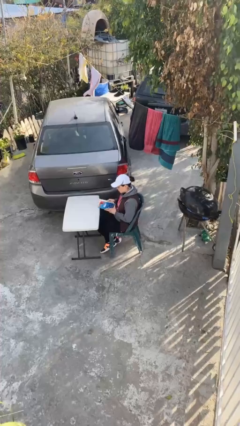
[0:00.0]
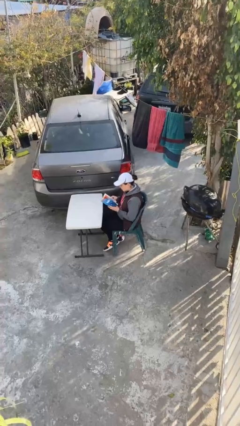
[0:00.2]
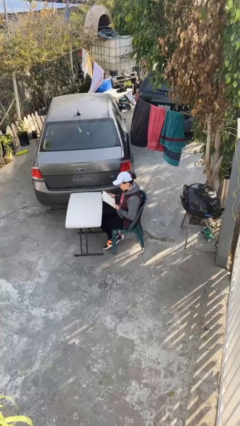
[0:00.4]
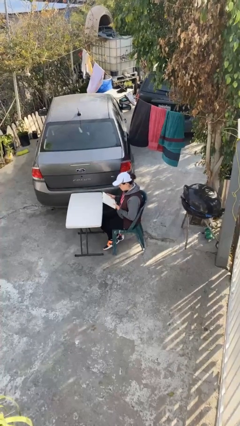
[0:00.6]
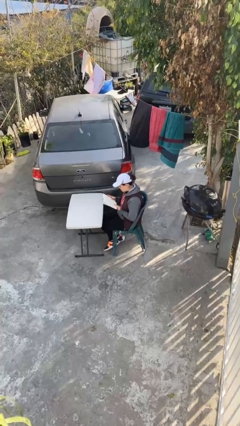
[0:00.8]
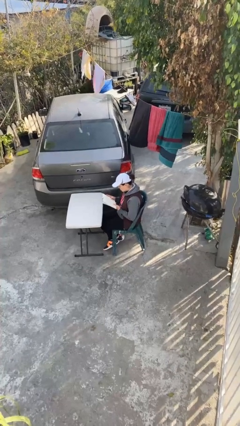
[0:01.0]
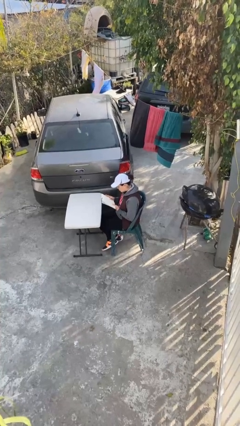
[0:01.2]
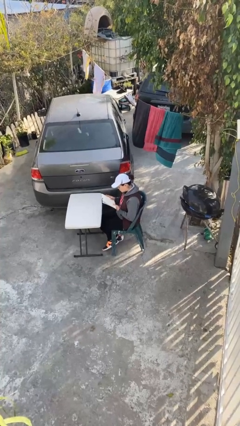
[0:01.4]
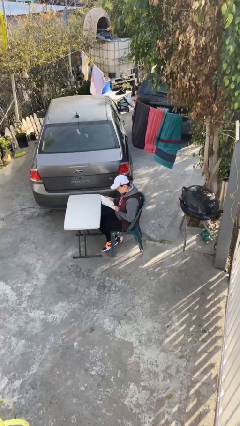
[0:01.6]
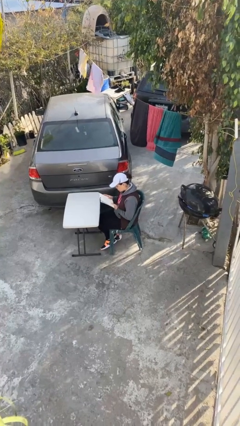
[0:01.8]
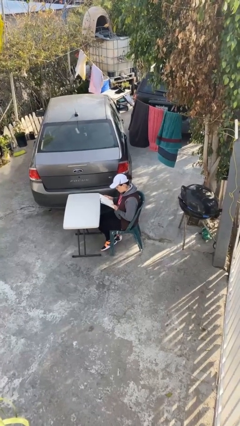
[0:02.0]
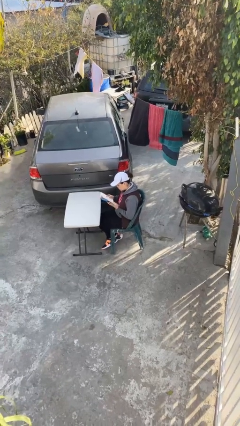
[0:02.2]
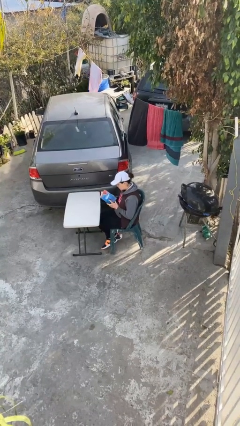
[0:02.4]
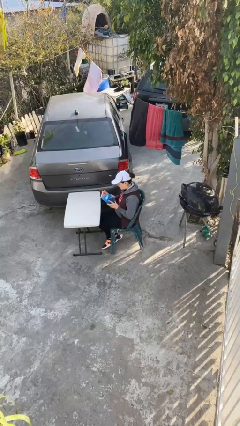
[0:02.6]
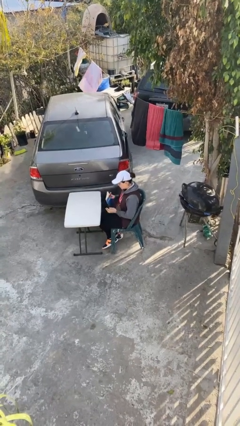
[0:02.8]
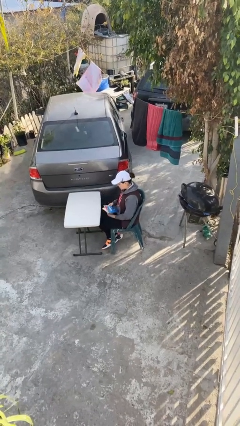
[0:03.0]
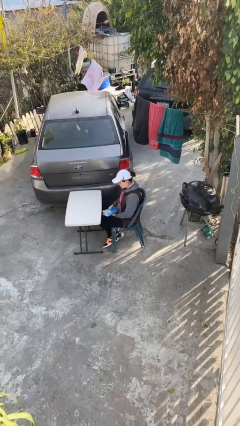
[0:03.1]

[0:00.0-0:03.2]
person reads document

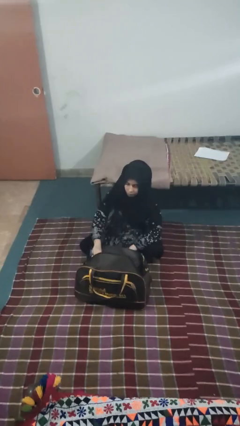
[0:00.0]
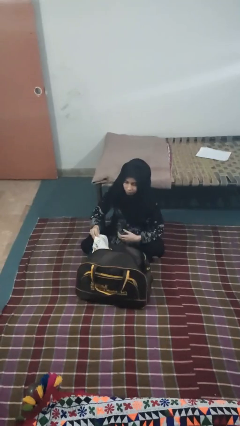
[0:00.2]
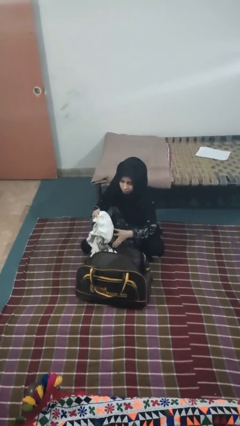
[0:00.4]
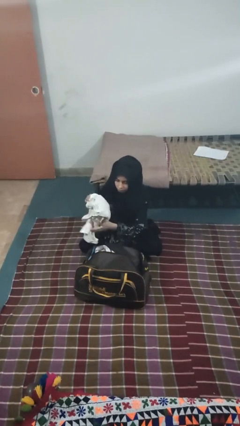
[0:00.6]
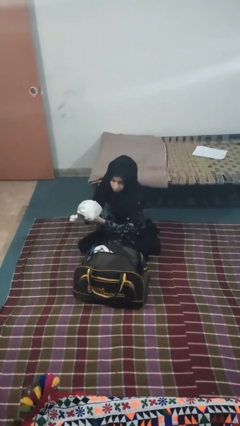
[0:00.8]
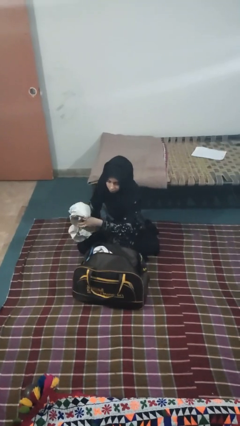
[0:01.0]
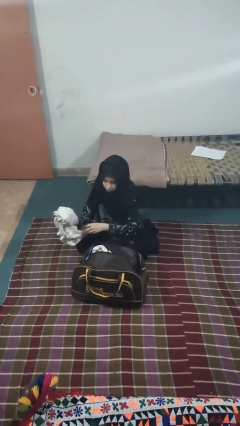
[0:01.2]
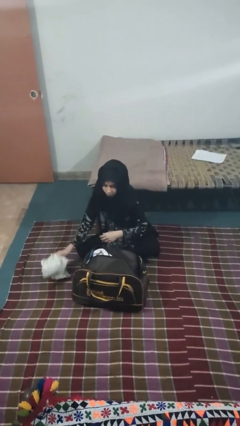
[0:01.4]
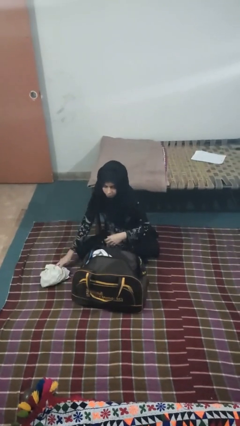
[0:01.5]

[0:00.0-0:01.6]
person unloads clothes from suitcase

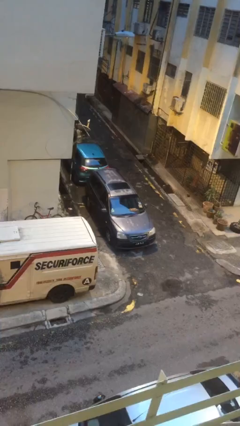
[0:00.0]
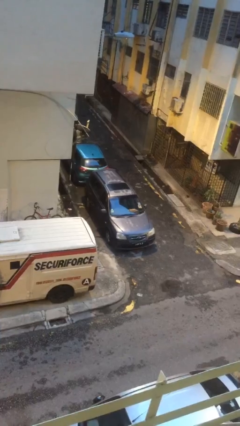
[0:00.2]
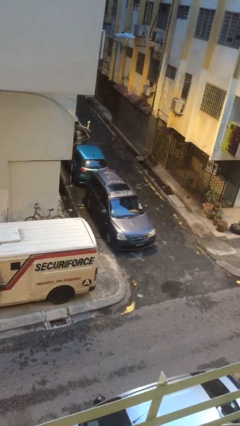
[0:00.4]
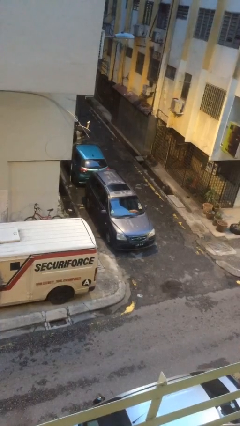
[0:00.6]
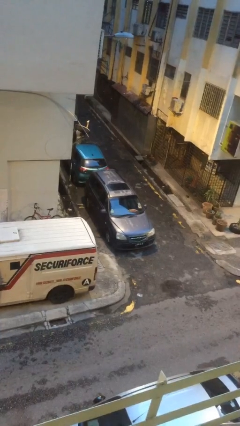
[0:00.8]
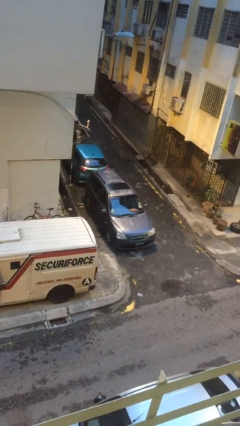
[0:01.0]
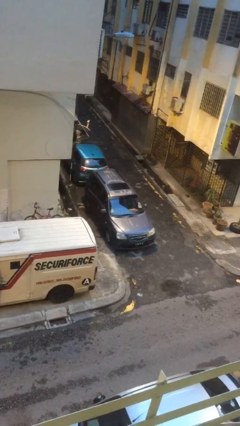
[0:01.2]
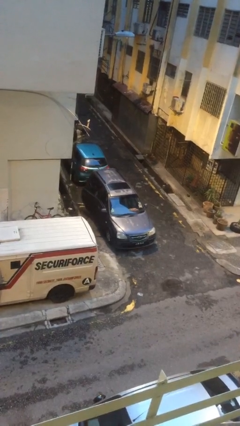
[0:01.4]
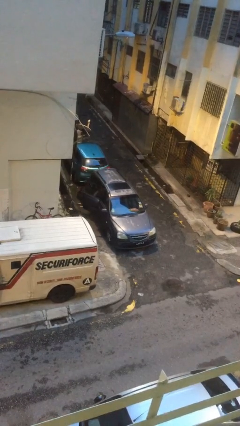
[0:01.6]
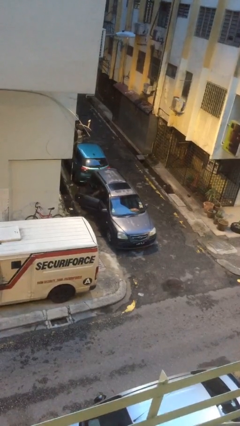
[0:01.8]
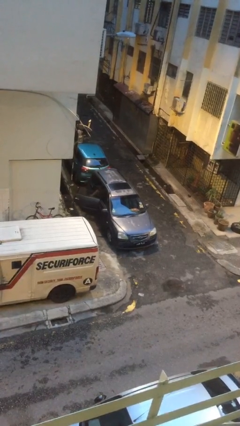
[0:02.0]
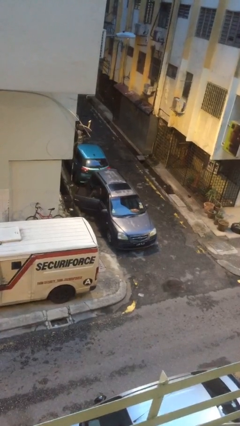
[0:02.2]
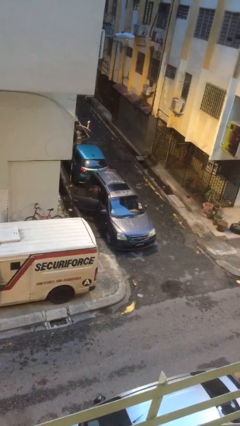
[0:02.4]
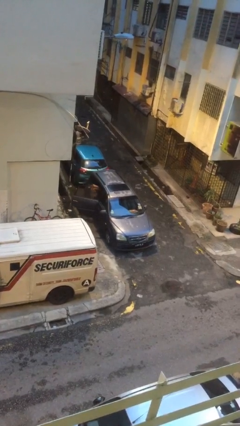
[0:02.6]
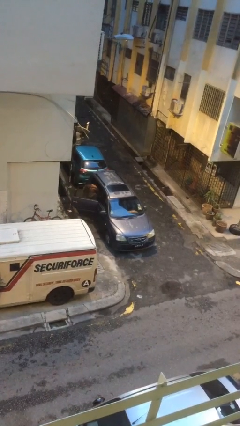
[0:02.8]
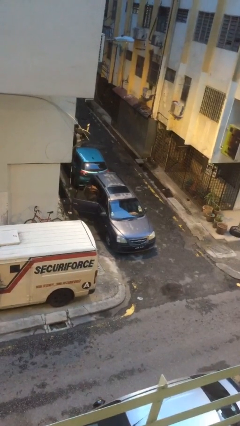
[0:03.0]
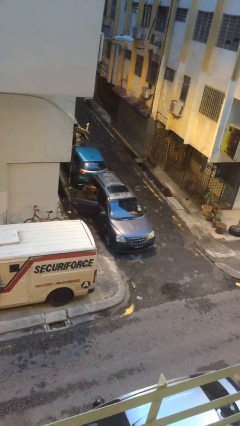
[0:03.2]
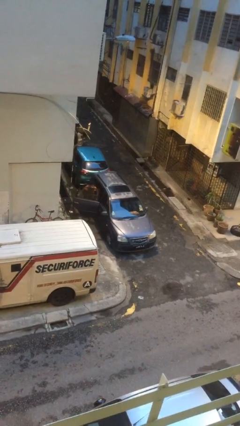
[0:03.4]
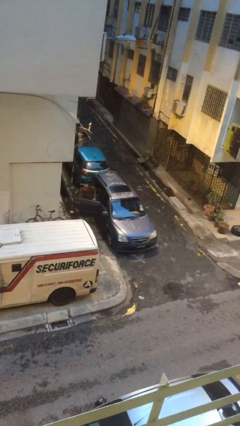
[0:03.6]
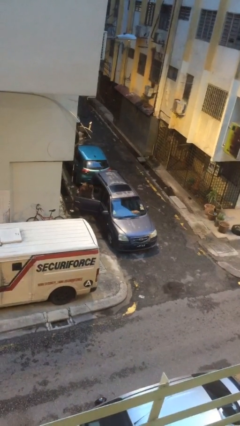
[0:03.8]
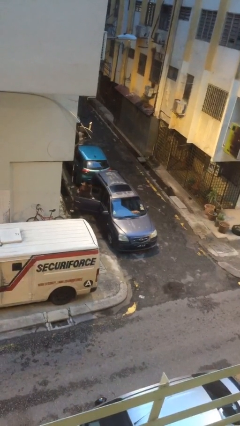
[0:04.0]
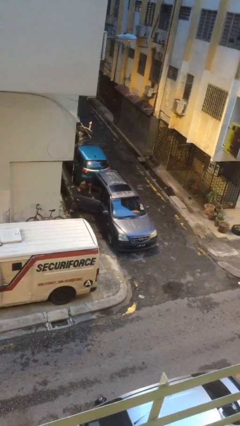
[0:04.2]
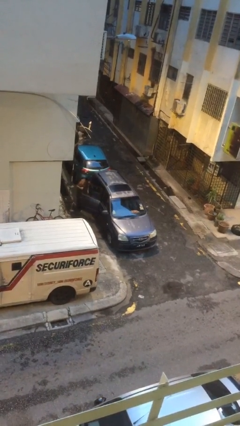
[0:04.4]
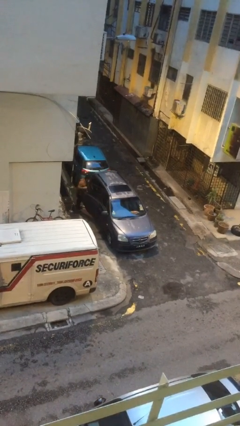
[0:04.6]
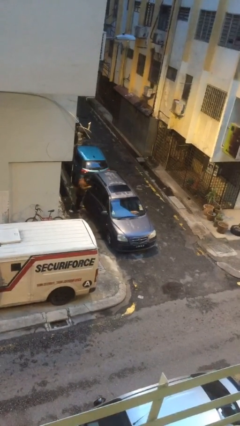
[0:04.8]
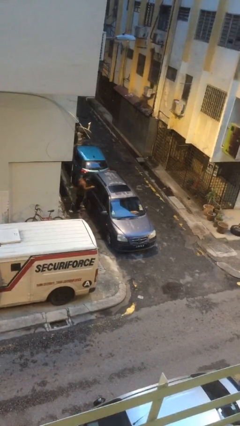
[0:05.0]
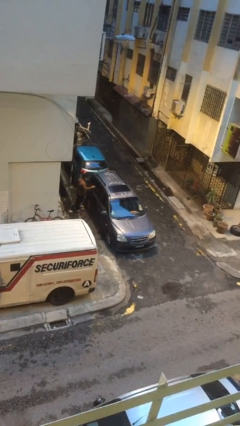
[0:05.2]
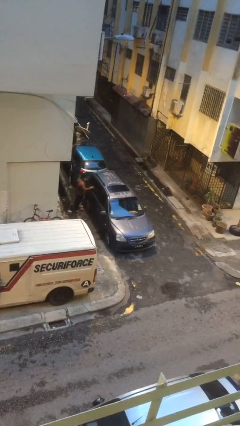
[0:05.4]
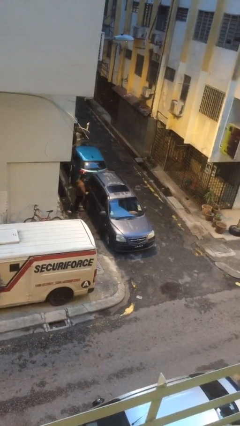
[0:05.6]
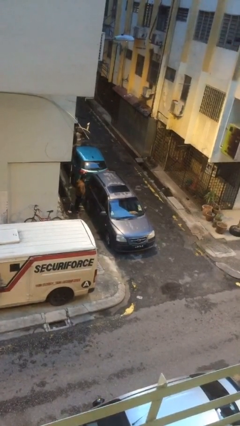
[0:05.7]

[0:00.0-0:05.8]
car drops off person

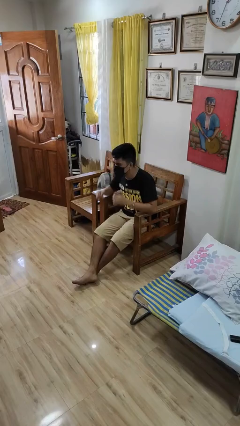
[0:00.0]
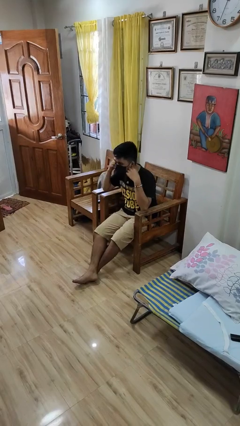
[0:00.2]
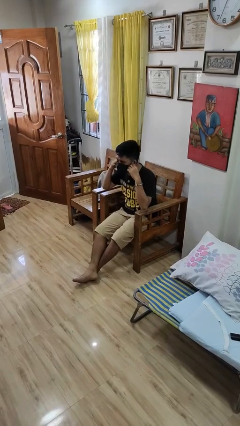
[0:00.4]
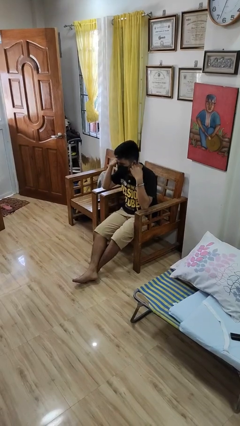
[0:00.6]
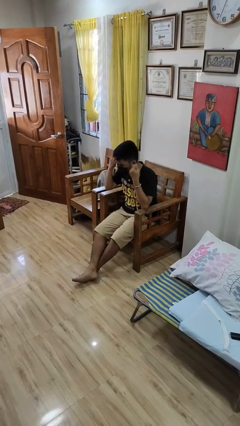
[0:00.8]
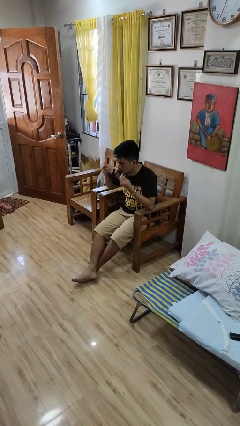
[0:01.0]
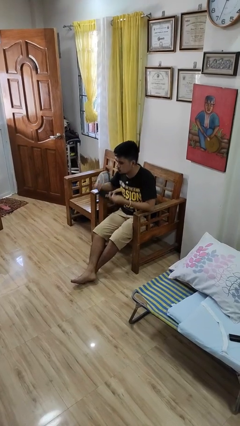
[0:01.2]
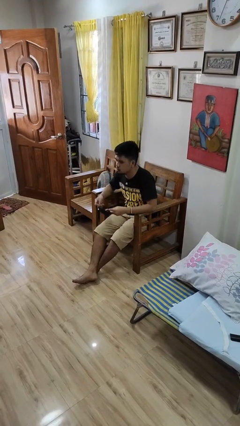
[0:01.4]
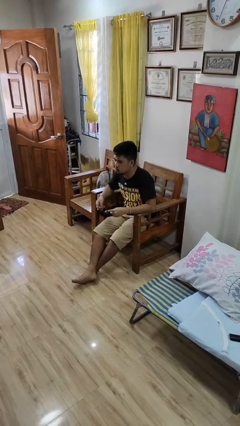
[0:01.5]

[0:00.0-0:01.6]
person takes off facemask

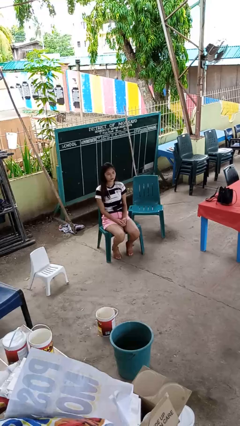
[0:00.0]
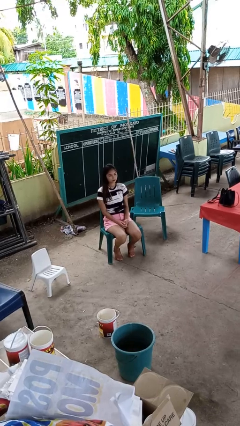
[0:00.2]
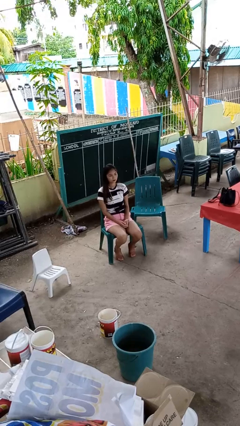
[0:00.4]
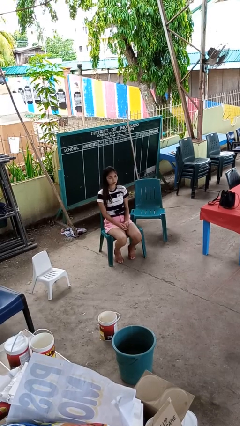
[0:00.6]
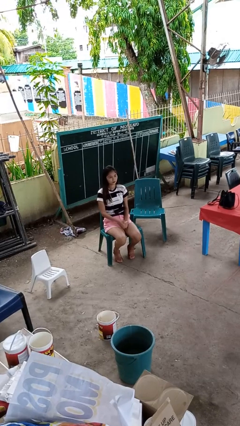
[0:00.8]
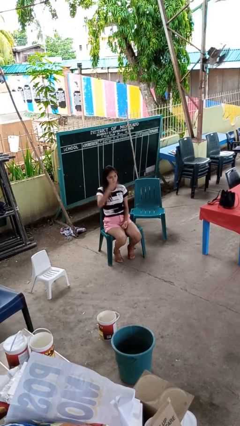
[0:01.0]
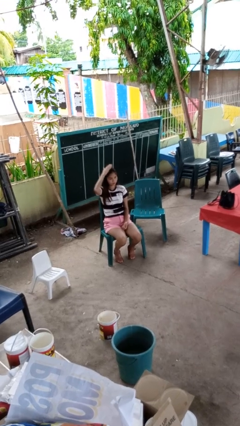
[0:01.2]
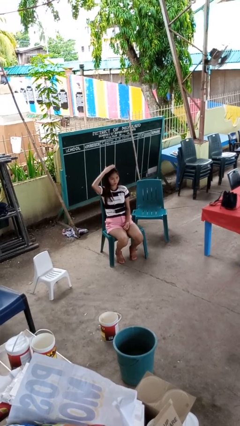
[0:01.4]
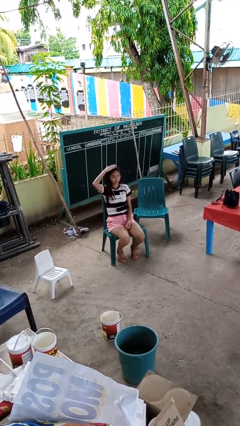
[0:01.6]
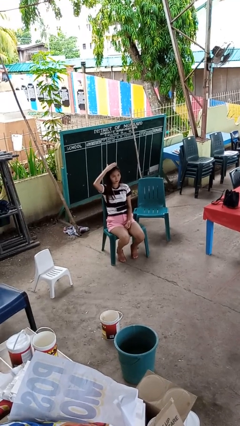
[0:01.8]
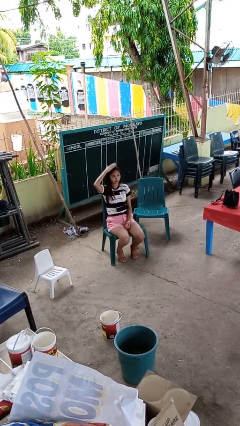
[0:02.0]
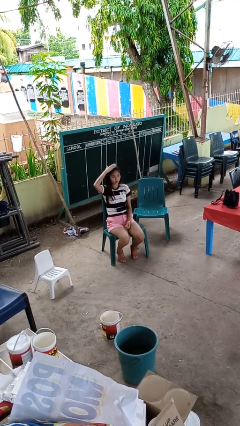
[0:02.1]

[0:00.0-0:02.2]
person pats head

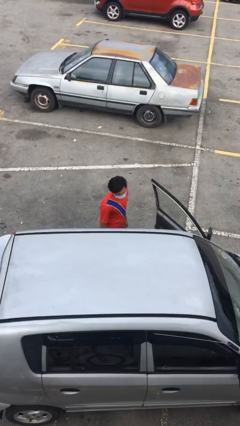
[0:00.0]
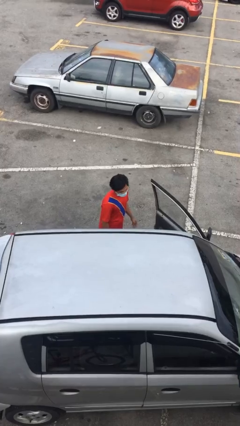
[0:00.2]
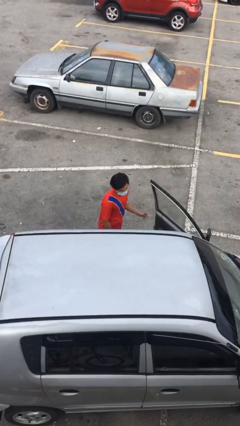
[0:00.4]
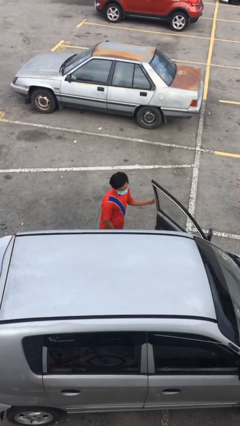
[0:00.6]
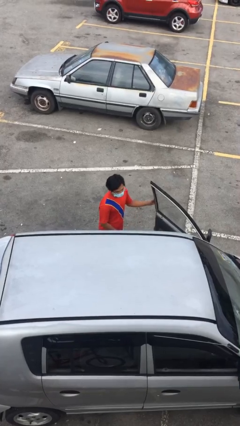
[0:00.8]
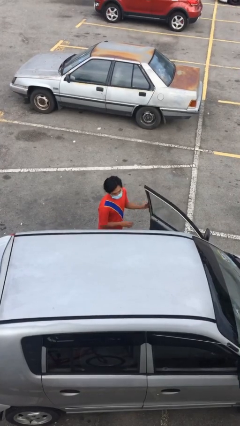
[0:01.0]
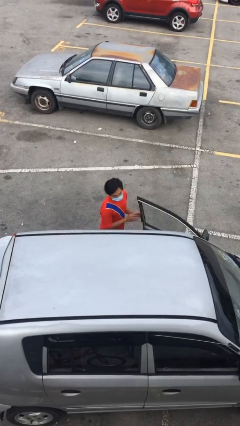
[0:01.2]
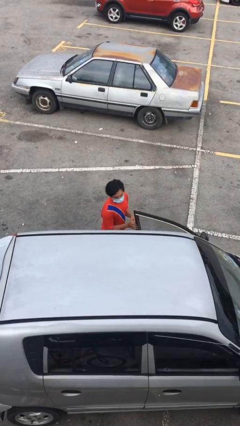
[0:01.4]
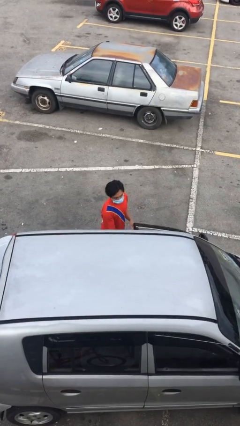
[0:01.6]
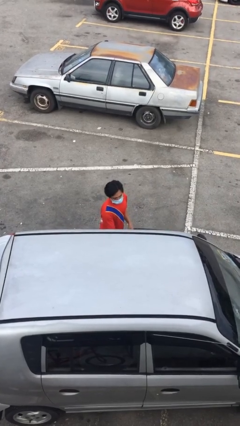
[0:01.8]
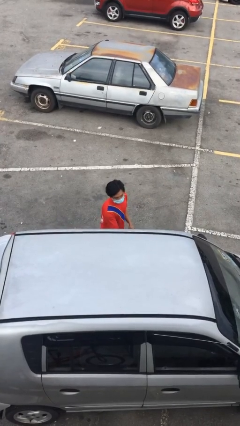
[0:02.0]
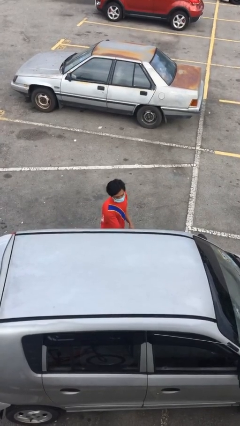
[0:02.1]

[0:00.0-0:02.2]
person closes car door

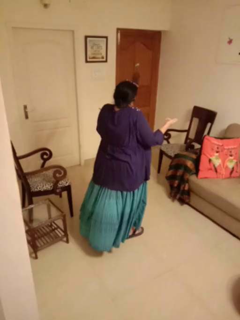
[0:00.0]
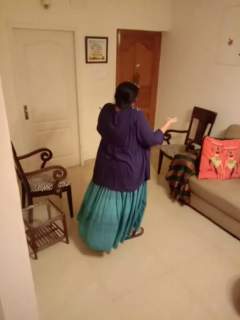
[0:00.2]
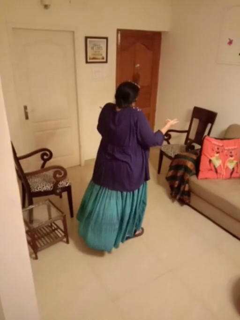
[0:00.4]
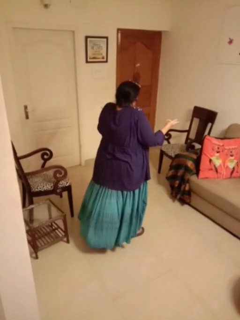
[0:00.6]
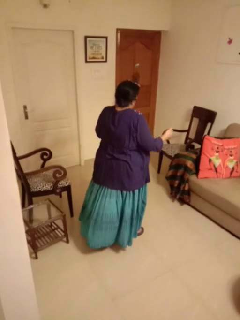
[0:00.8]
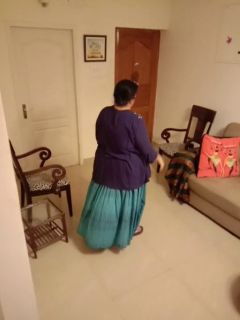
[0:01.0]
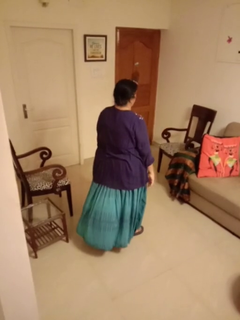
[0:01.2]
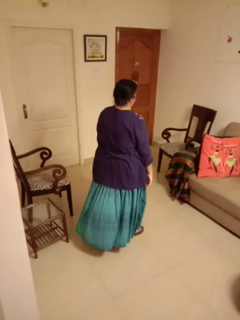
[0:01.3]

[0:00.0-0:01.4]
person shrugs
